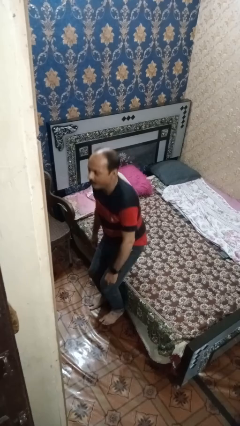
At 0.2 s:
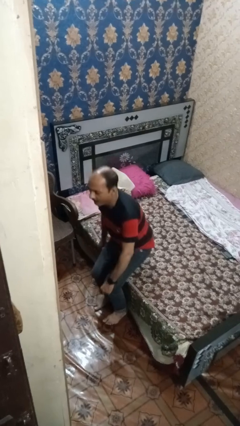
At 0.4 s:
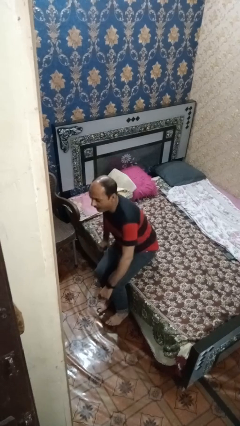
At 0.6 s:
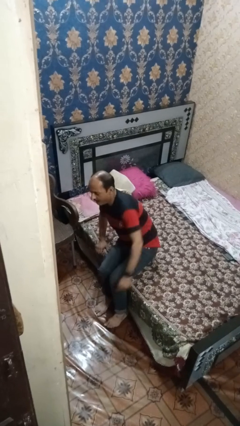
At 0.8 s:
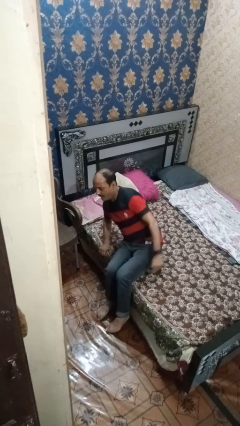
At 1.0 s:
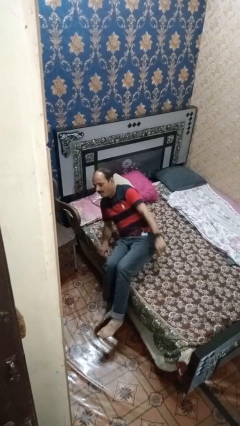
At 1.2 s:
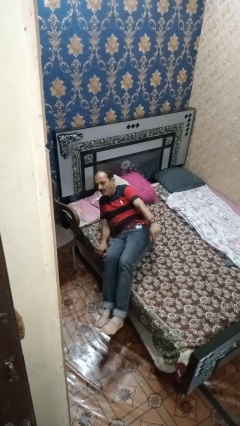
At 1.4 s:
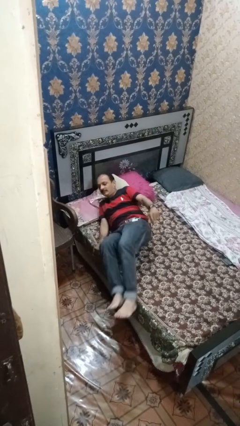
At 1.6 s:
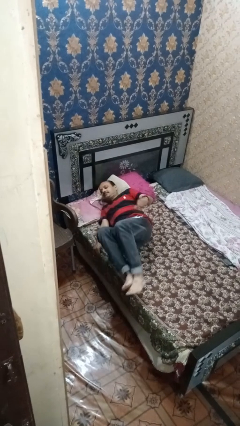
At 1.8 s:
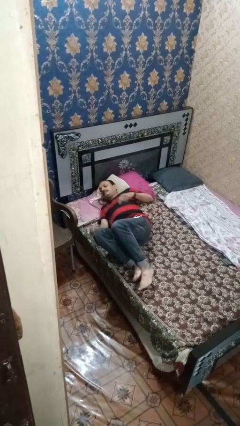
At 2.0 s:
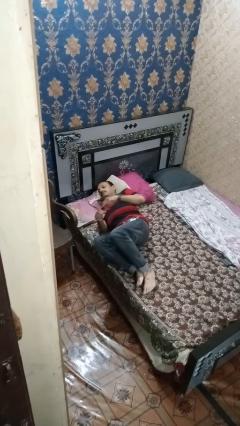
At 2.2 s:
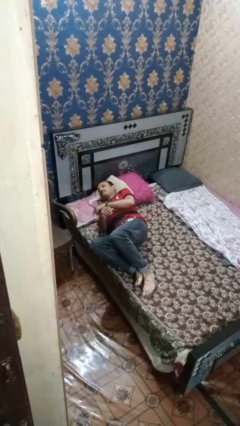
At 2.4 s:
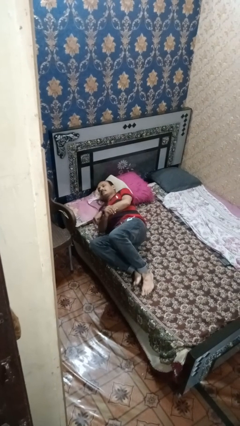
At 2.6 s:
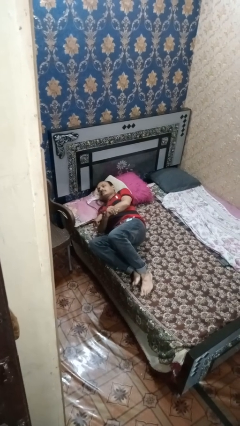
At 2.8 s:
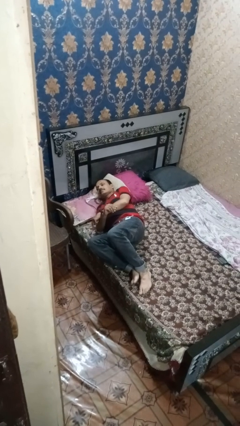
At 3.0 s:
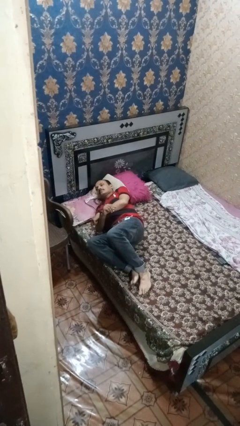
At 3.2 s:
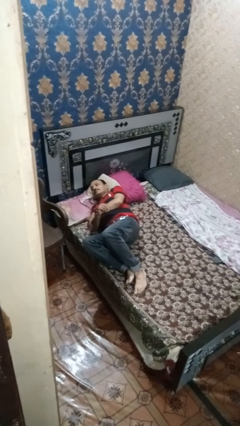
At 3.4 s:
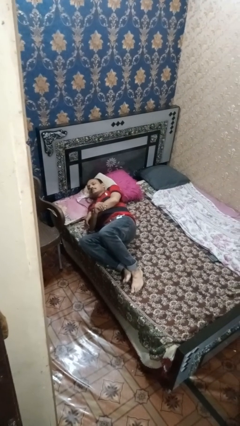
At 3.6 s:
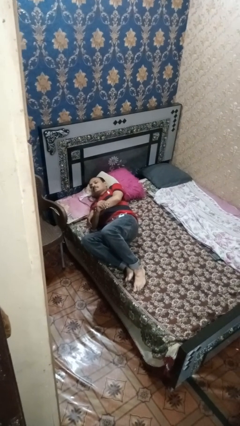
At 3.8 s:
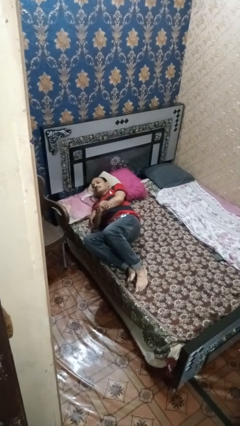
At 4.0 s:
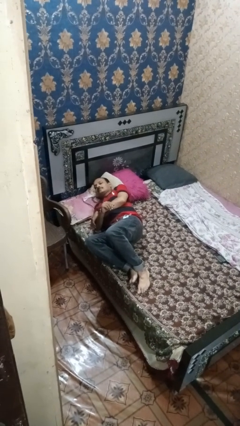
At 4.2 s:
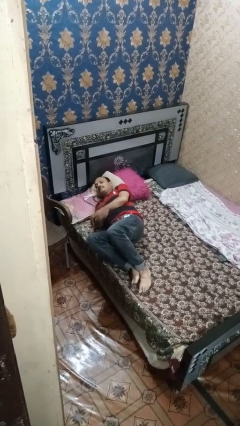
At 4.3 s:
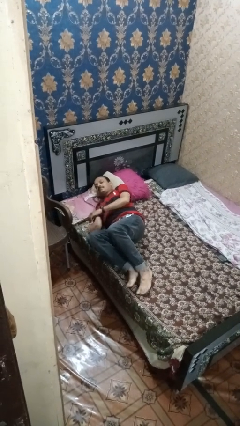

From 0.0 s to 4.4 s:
person lies down on bed

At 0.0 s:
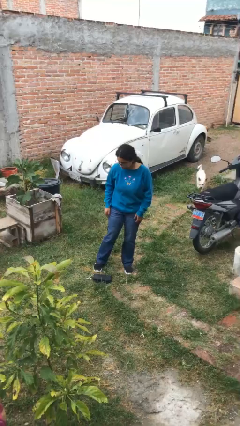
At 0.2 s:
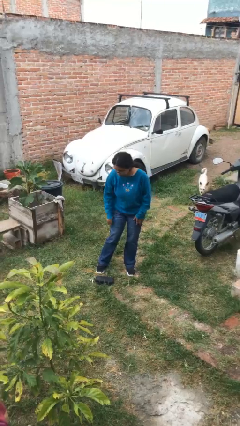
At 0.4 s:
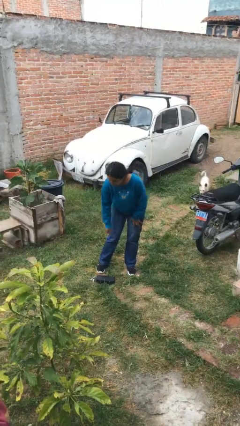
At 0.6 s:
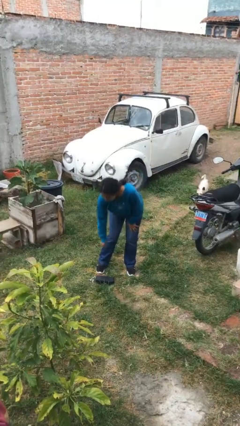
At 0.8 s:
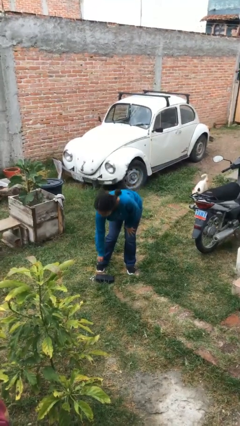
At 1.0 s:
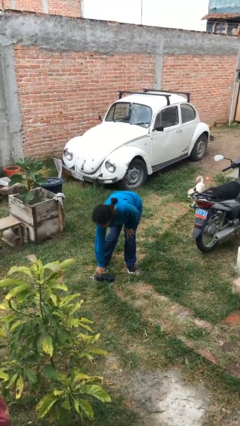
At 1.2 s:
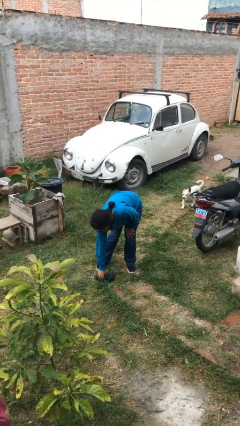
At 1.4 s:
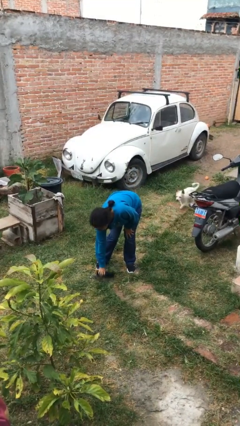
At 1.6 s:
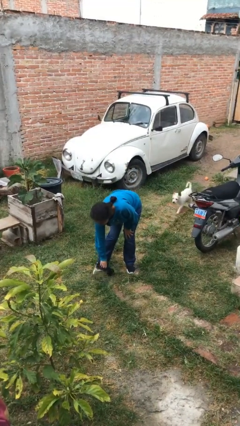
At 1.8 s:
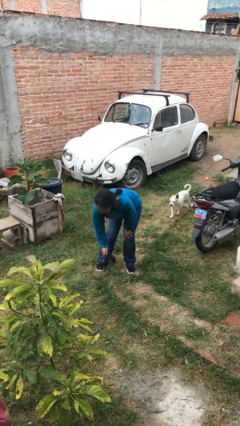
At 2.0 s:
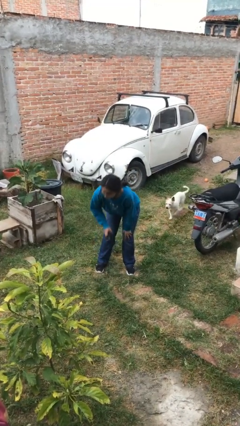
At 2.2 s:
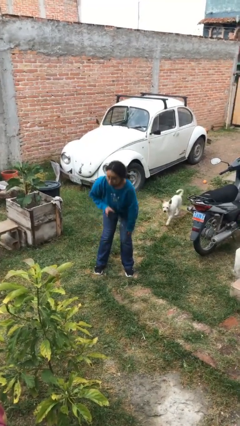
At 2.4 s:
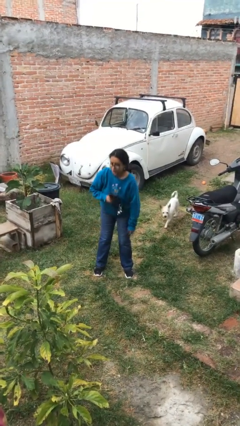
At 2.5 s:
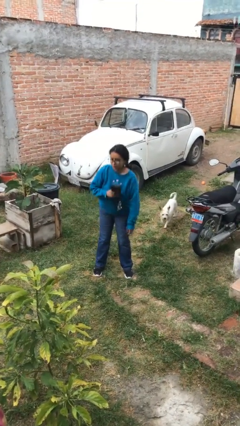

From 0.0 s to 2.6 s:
person picks up object from floor

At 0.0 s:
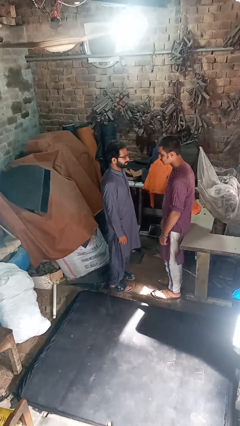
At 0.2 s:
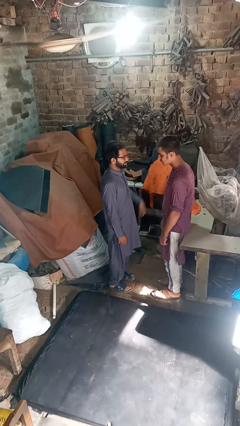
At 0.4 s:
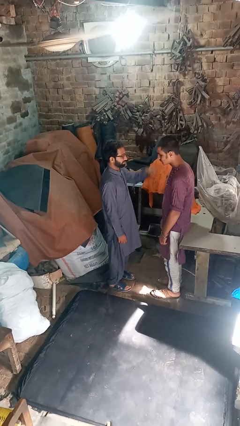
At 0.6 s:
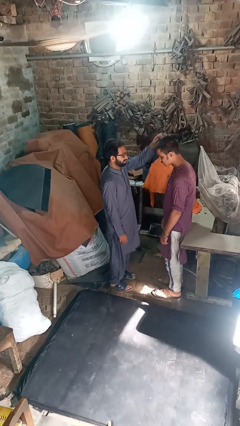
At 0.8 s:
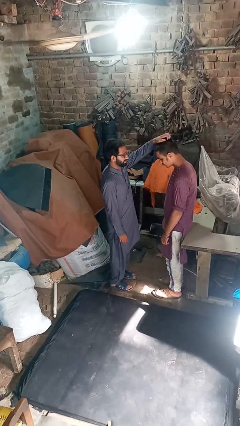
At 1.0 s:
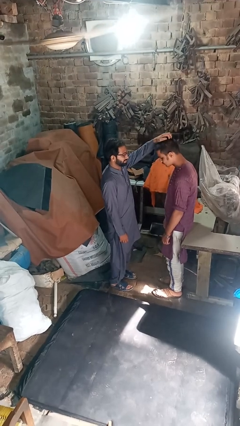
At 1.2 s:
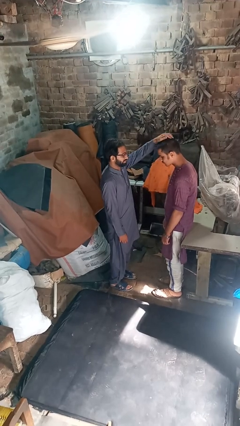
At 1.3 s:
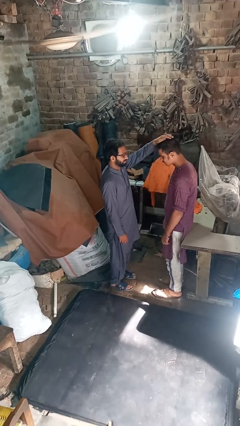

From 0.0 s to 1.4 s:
person grabs person by hair

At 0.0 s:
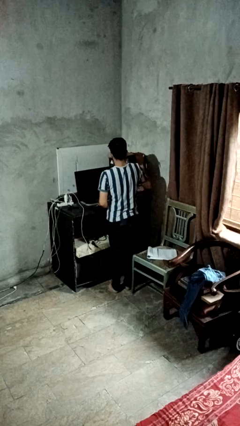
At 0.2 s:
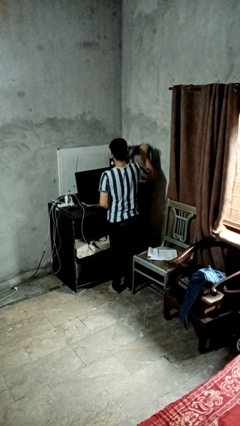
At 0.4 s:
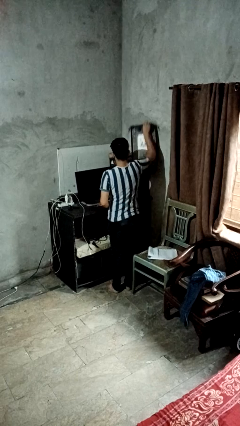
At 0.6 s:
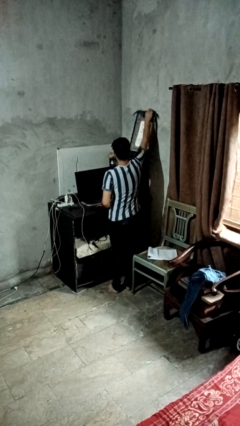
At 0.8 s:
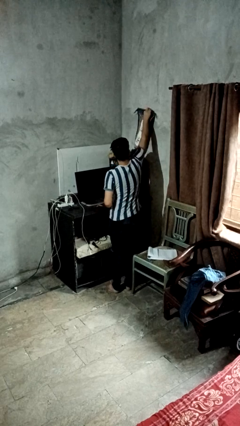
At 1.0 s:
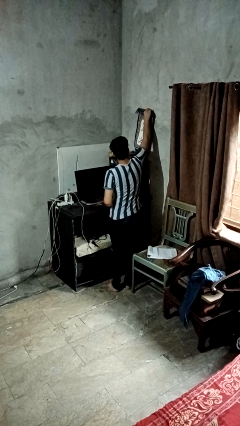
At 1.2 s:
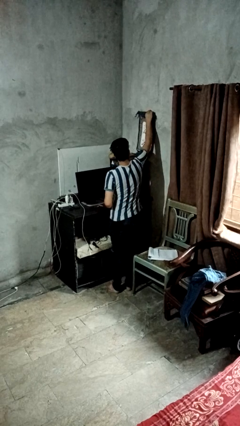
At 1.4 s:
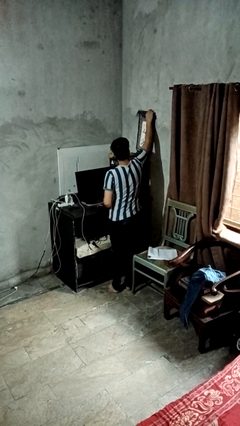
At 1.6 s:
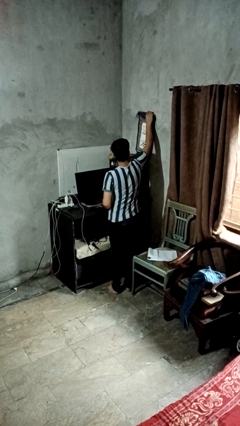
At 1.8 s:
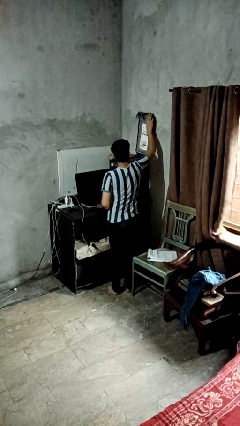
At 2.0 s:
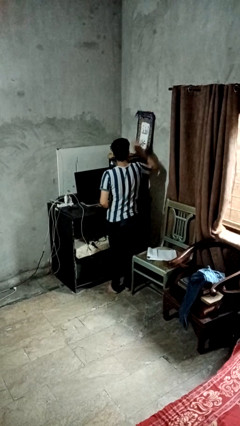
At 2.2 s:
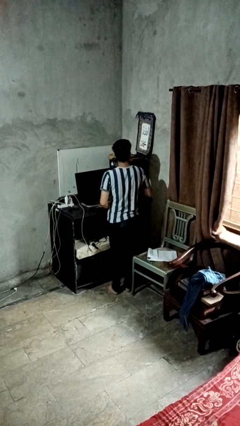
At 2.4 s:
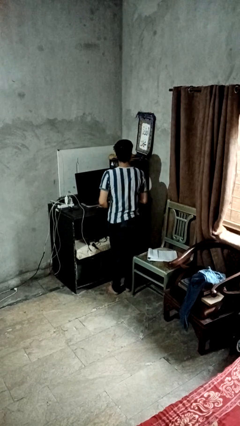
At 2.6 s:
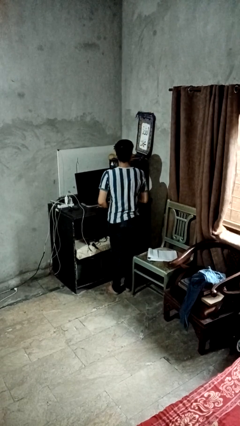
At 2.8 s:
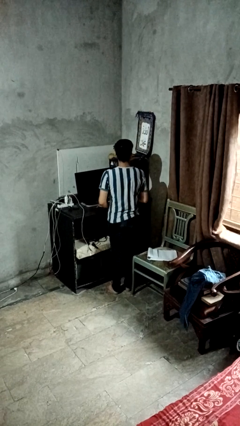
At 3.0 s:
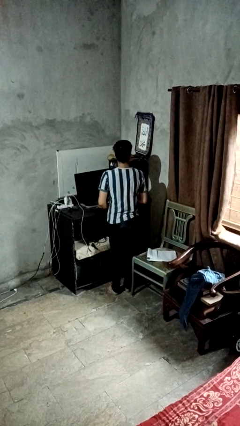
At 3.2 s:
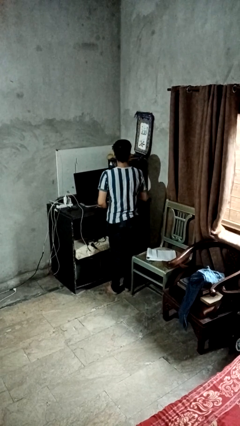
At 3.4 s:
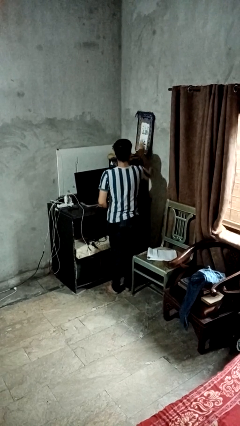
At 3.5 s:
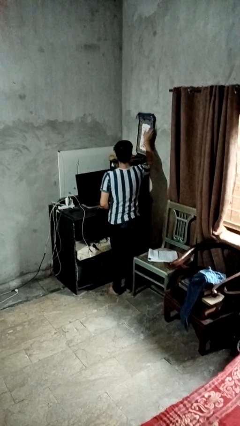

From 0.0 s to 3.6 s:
person puts up picture frame

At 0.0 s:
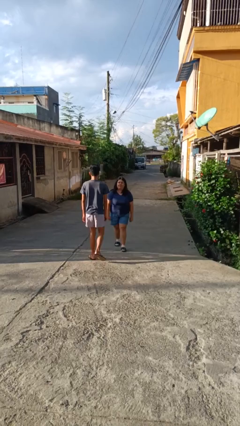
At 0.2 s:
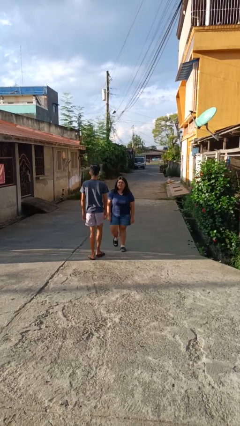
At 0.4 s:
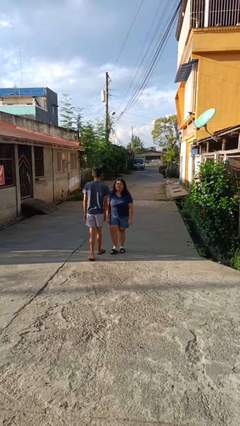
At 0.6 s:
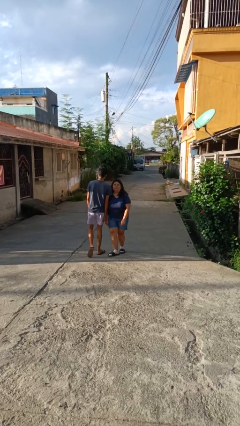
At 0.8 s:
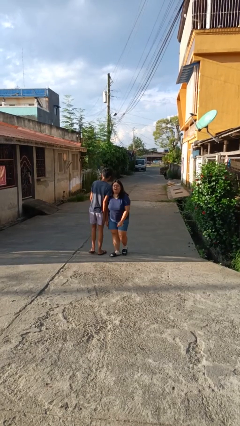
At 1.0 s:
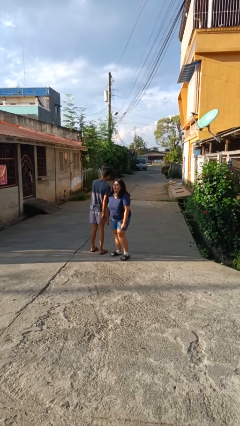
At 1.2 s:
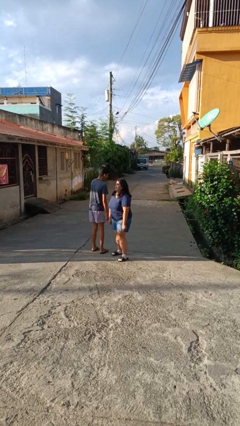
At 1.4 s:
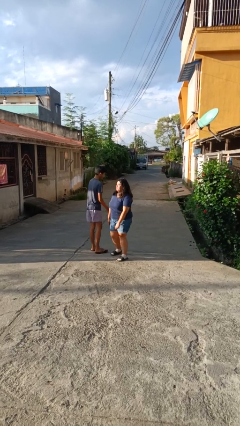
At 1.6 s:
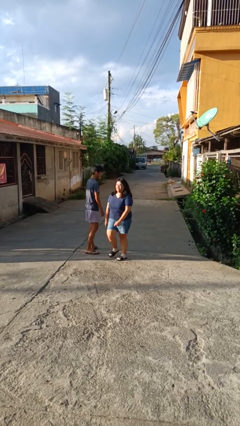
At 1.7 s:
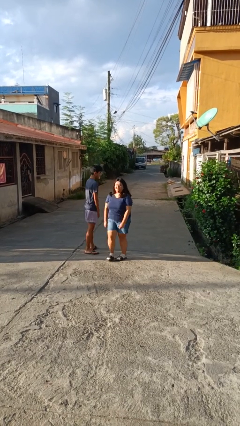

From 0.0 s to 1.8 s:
person bumps into person

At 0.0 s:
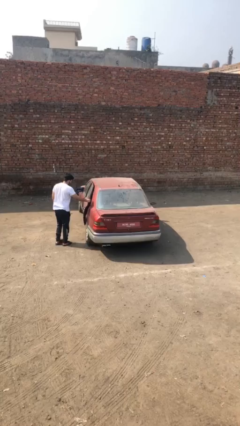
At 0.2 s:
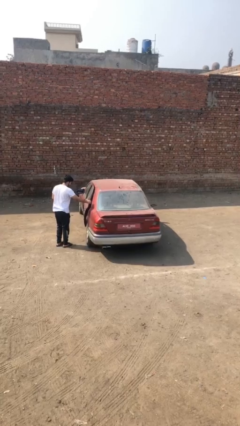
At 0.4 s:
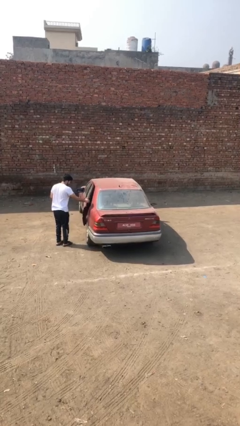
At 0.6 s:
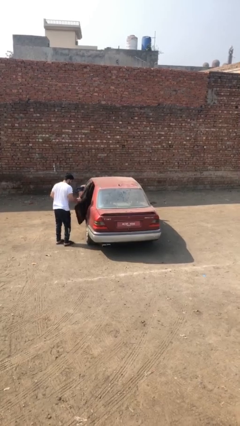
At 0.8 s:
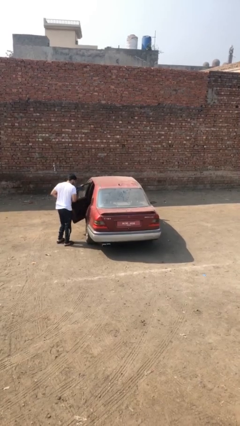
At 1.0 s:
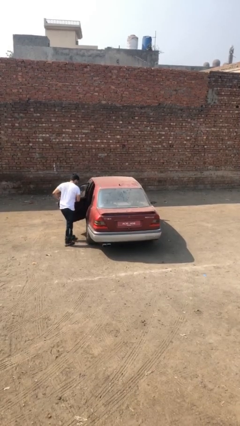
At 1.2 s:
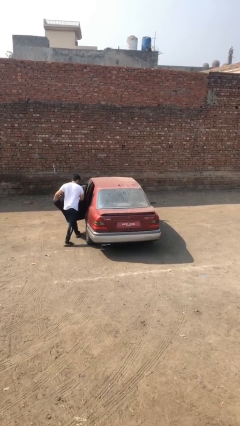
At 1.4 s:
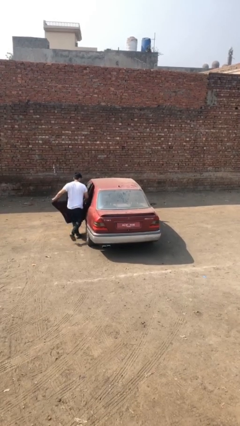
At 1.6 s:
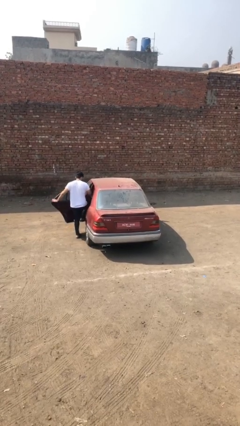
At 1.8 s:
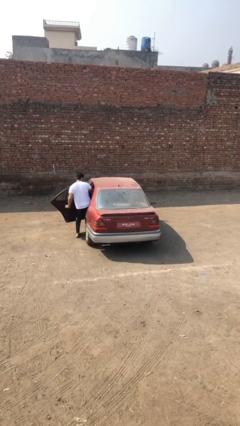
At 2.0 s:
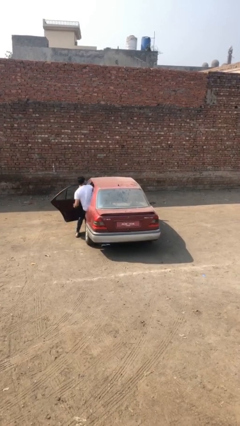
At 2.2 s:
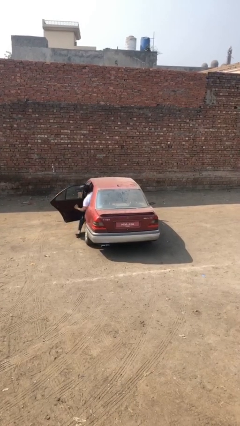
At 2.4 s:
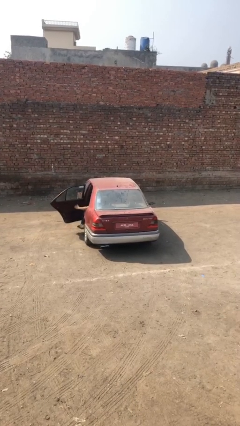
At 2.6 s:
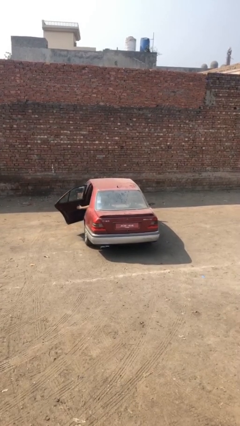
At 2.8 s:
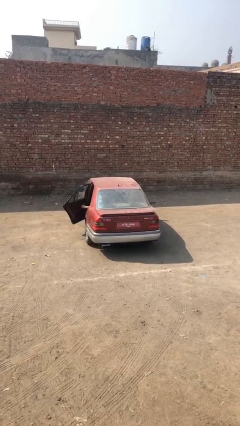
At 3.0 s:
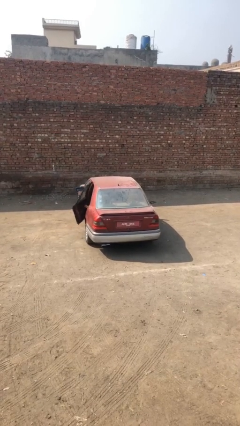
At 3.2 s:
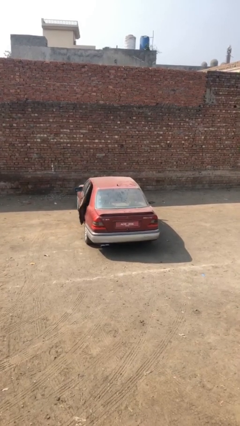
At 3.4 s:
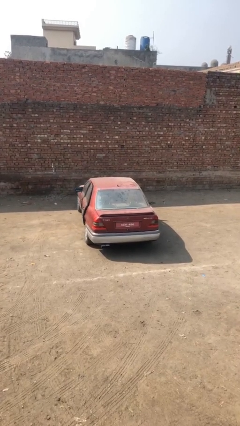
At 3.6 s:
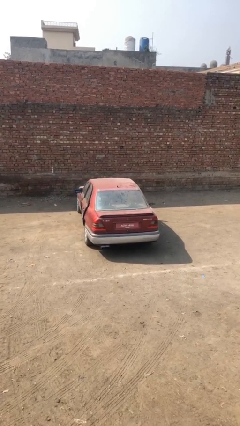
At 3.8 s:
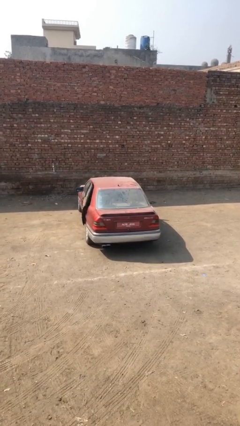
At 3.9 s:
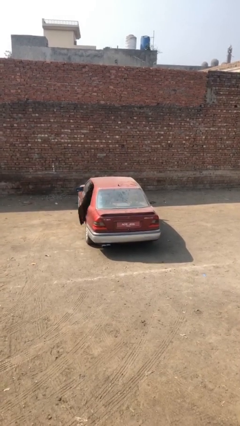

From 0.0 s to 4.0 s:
car picks up person
